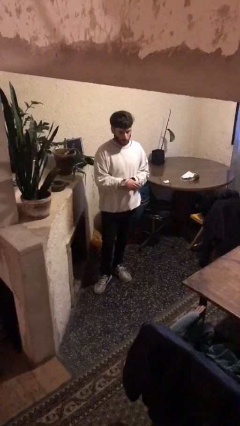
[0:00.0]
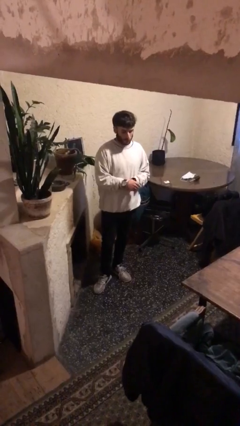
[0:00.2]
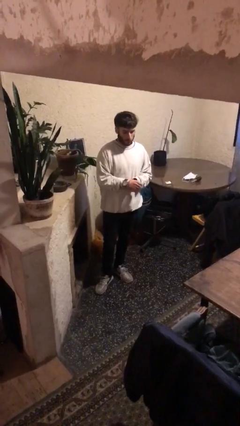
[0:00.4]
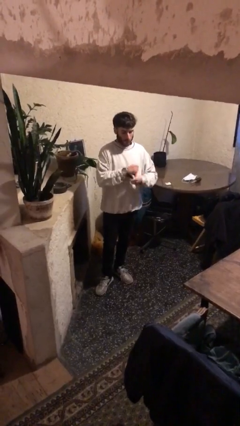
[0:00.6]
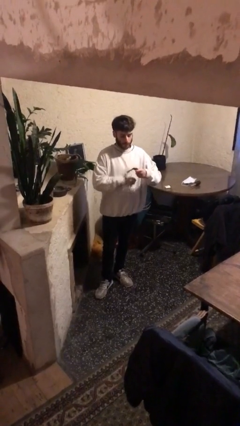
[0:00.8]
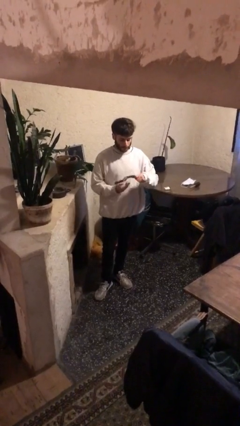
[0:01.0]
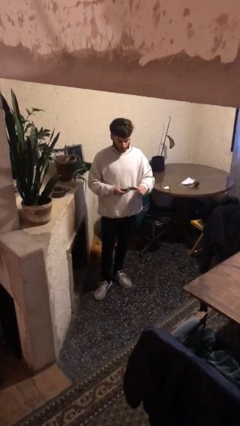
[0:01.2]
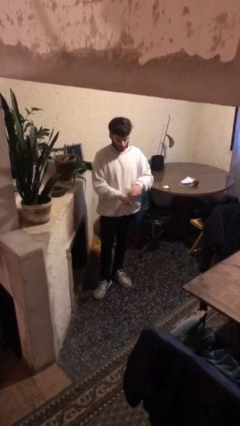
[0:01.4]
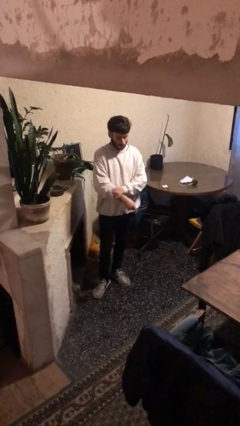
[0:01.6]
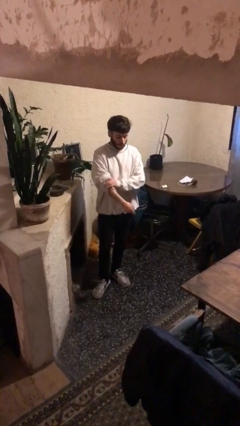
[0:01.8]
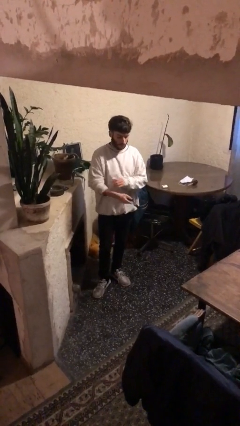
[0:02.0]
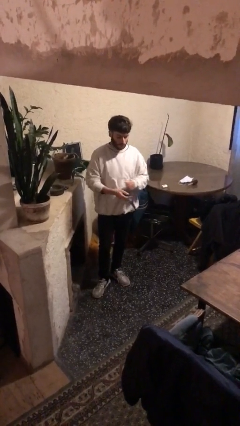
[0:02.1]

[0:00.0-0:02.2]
person takes off wristwatch

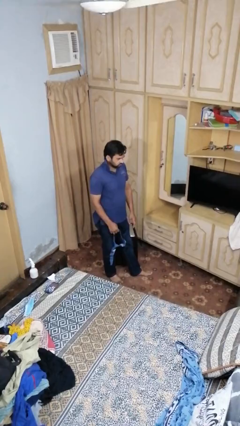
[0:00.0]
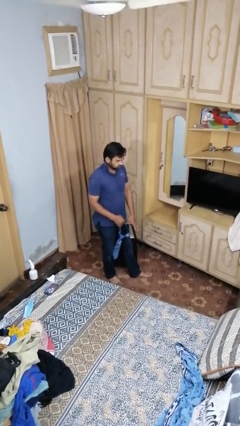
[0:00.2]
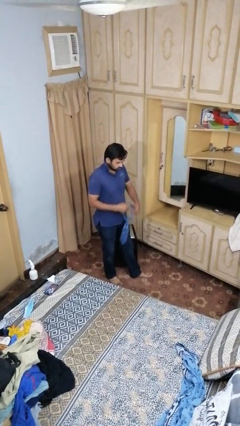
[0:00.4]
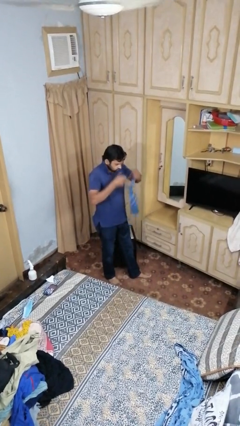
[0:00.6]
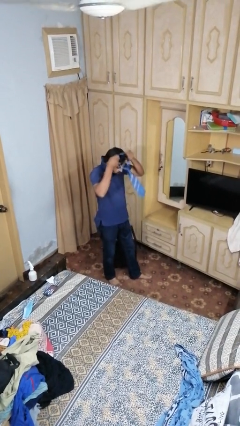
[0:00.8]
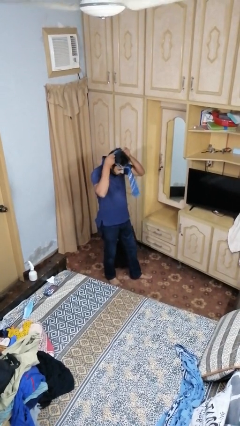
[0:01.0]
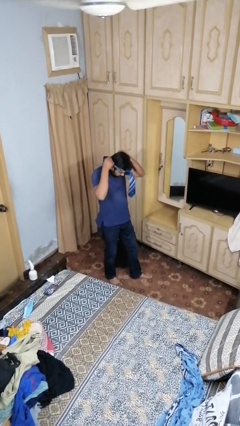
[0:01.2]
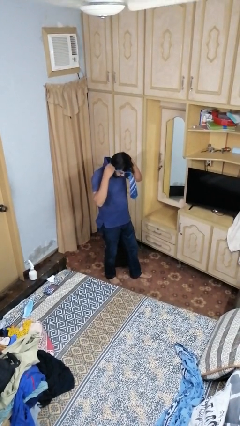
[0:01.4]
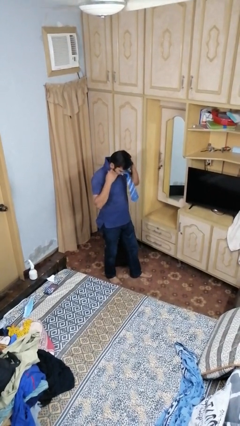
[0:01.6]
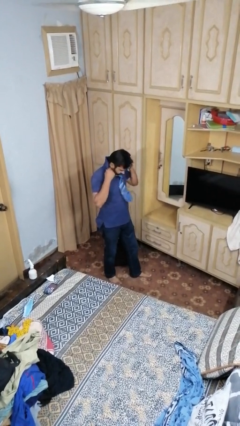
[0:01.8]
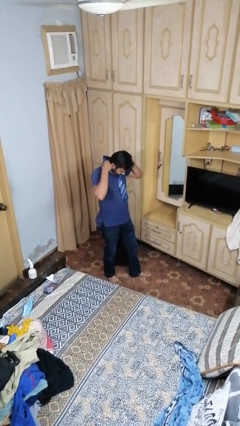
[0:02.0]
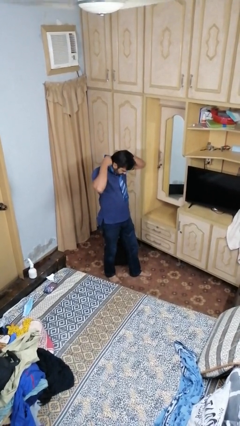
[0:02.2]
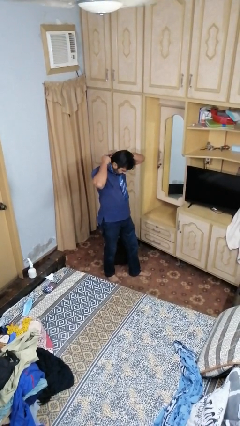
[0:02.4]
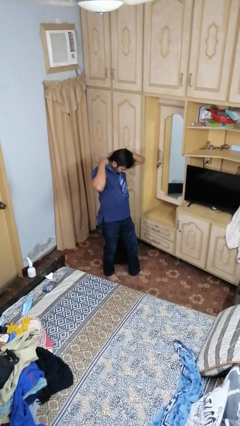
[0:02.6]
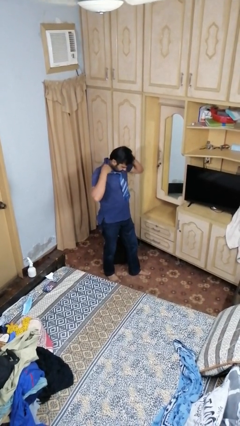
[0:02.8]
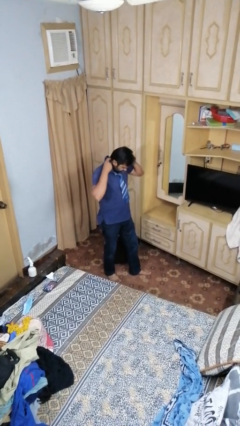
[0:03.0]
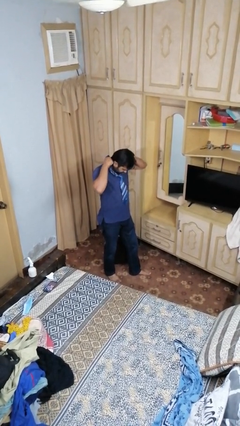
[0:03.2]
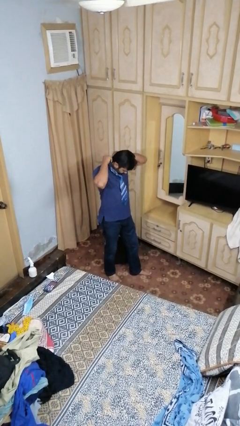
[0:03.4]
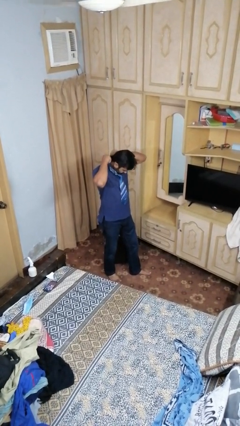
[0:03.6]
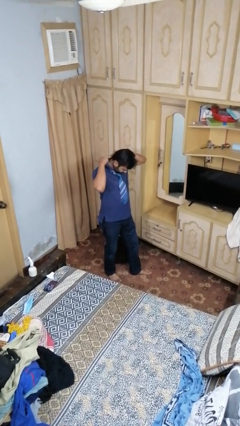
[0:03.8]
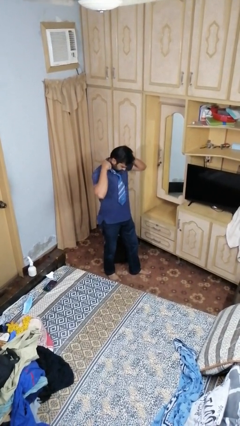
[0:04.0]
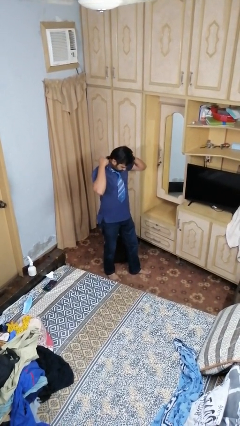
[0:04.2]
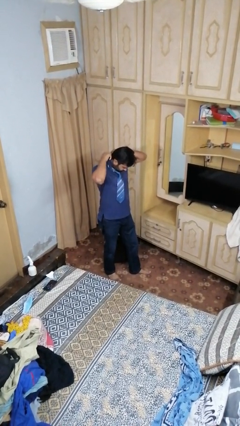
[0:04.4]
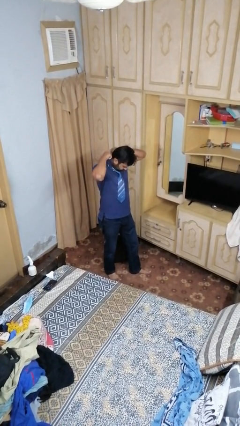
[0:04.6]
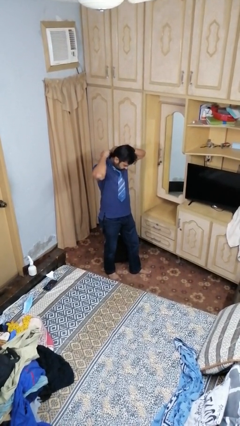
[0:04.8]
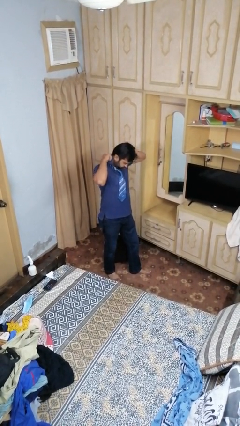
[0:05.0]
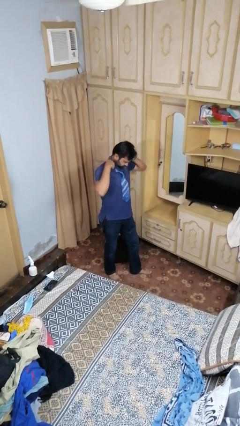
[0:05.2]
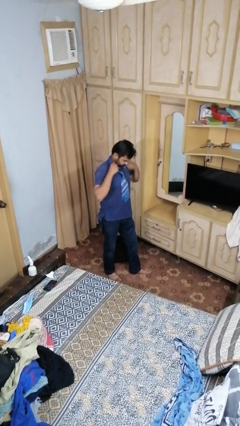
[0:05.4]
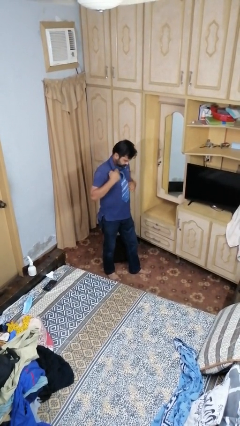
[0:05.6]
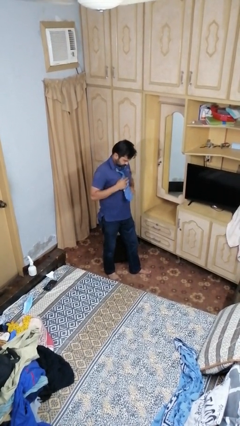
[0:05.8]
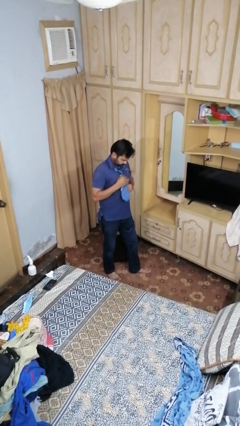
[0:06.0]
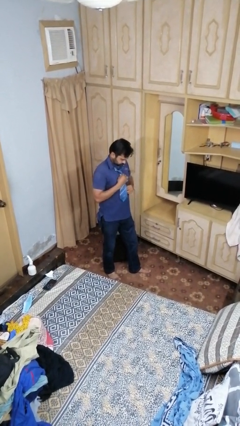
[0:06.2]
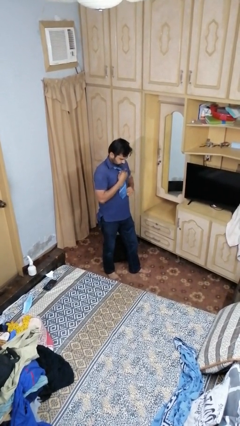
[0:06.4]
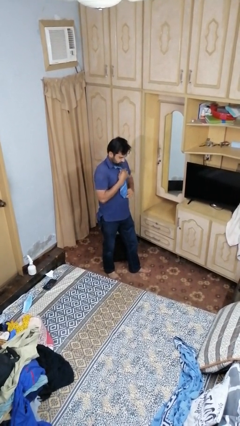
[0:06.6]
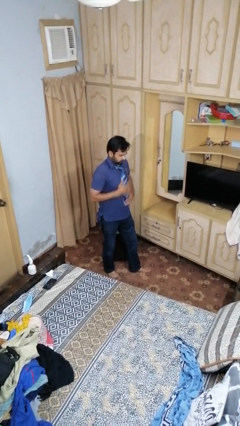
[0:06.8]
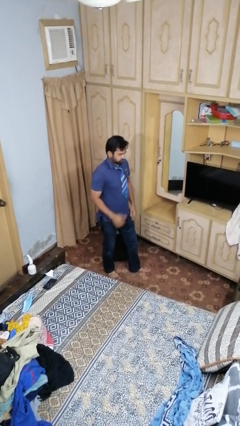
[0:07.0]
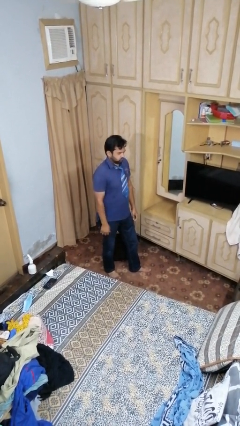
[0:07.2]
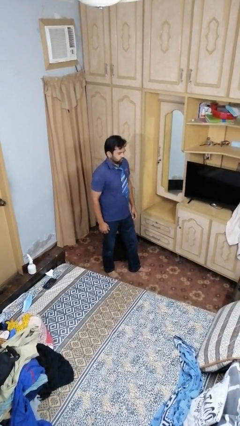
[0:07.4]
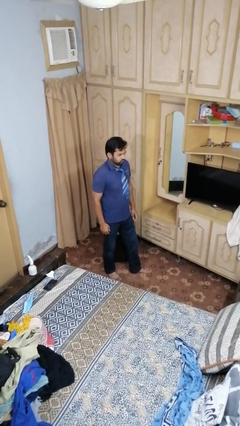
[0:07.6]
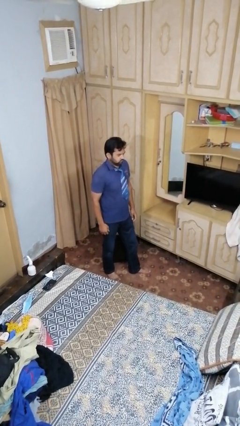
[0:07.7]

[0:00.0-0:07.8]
person puts on necktie

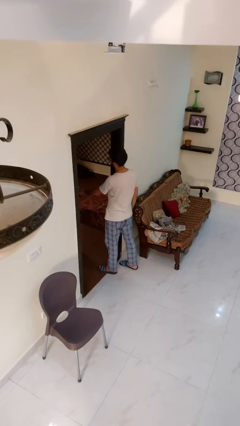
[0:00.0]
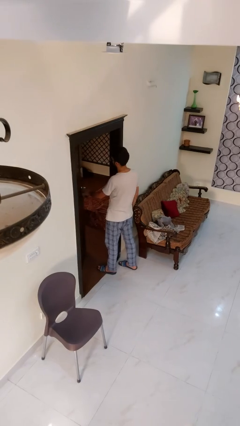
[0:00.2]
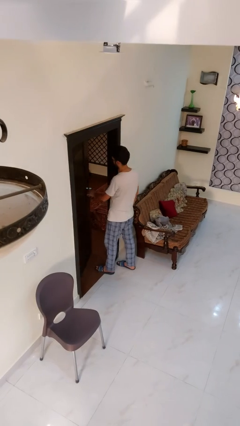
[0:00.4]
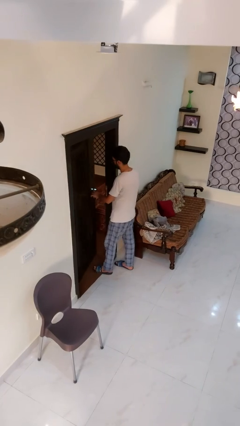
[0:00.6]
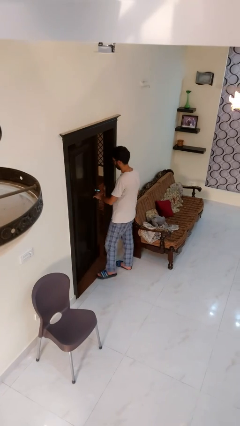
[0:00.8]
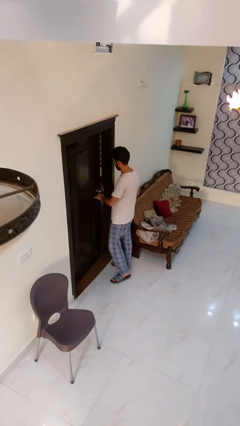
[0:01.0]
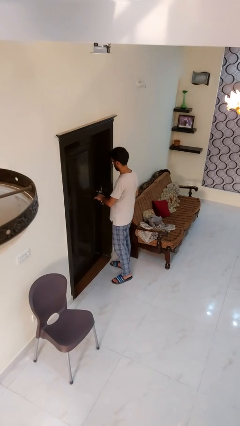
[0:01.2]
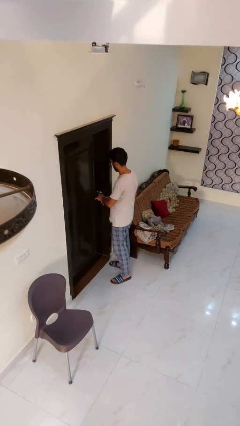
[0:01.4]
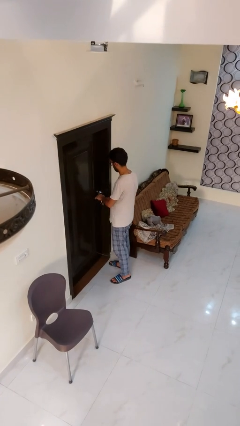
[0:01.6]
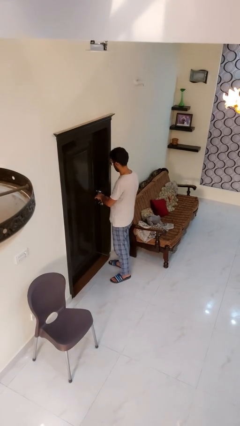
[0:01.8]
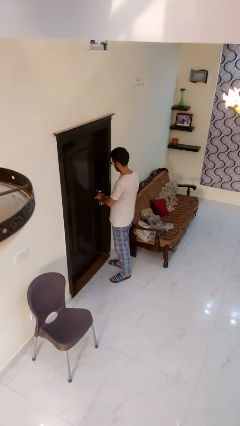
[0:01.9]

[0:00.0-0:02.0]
person closes facility door

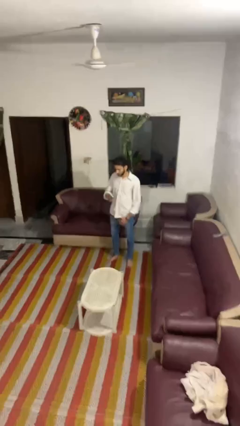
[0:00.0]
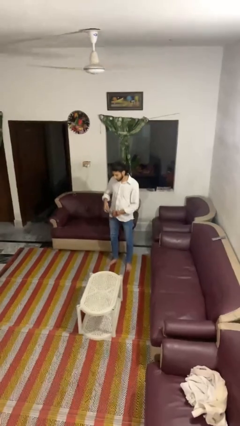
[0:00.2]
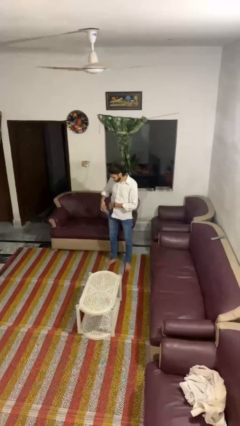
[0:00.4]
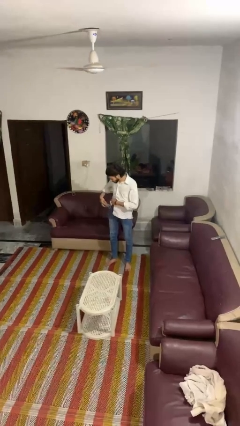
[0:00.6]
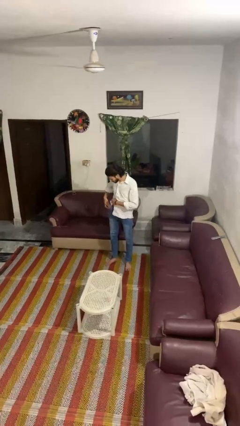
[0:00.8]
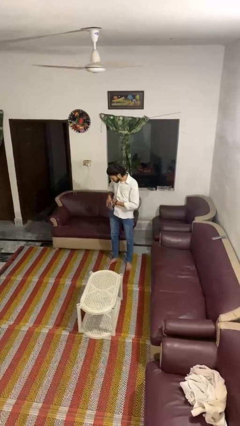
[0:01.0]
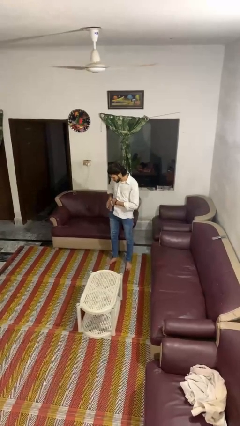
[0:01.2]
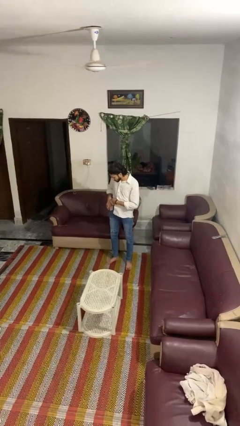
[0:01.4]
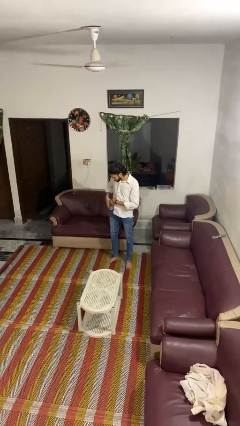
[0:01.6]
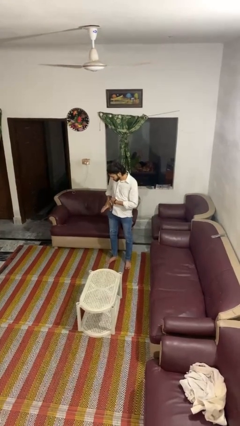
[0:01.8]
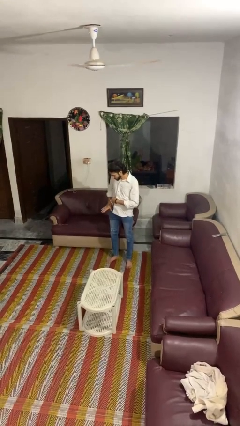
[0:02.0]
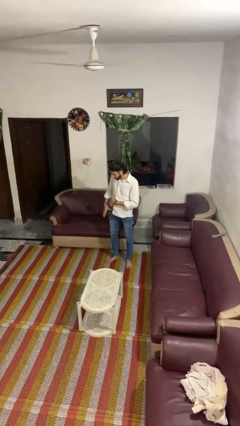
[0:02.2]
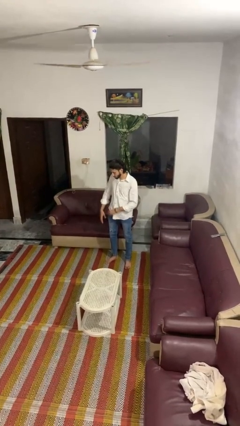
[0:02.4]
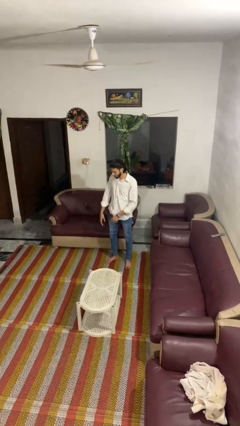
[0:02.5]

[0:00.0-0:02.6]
person puts phone into pocket

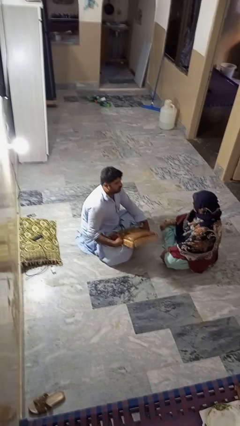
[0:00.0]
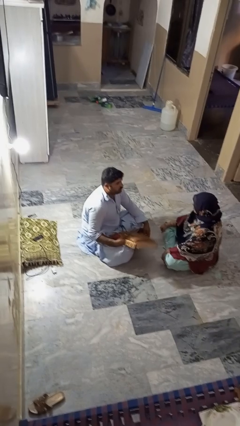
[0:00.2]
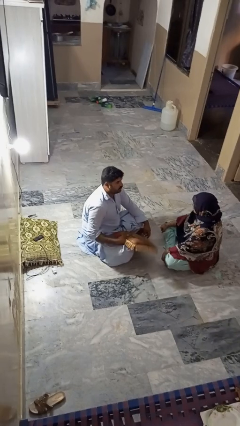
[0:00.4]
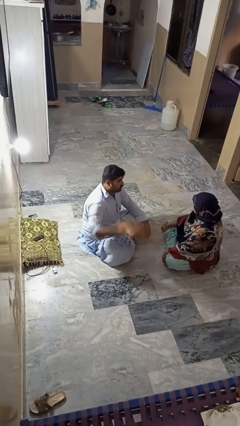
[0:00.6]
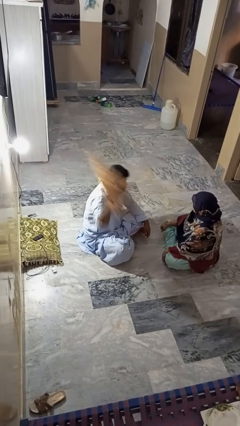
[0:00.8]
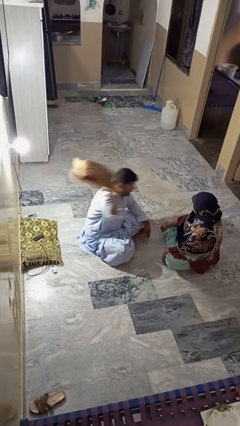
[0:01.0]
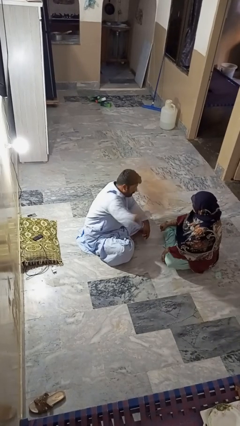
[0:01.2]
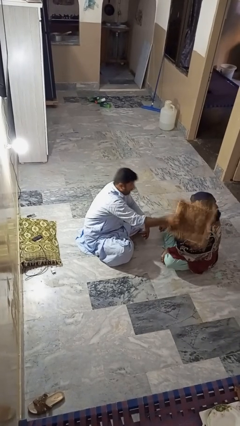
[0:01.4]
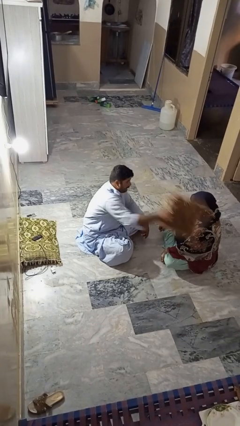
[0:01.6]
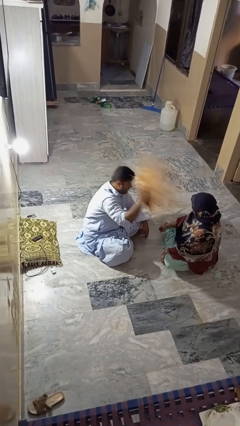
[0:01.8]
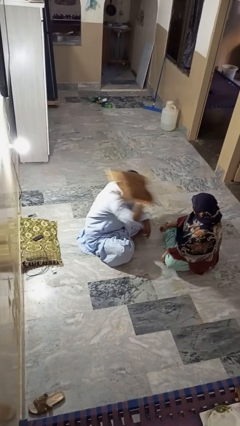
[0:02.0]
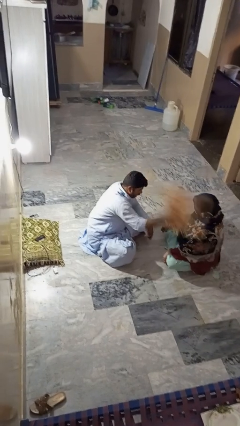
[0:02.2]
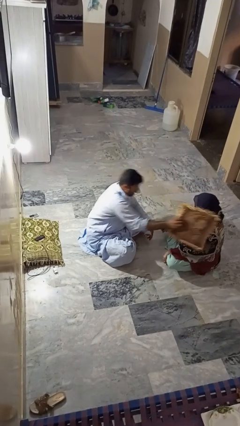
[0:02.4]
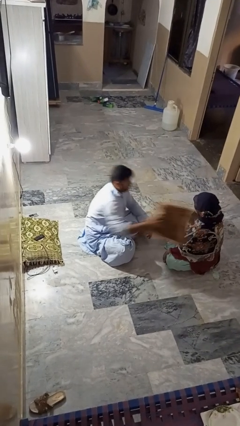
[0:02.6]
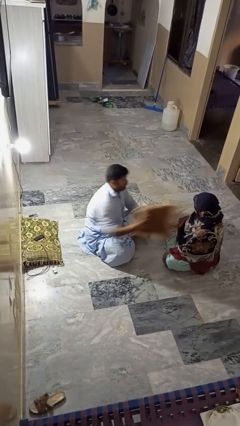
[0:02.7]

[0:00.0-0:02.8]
person hits person with pillow
